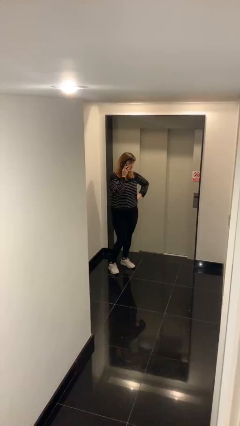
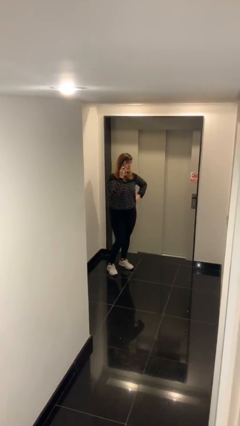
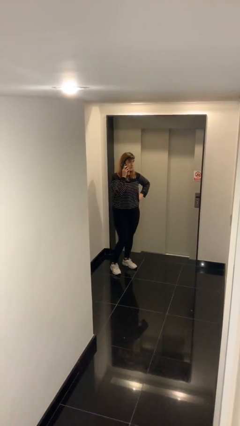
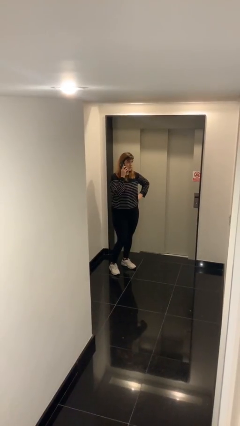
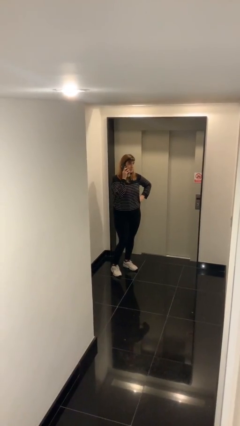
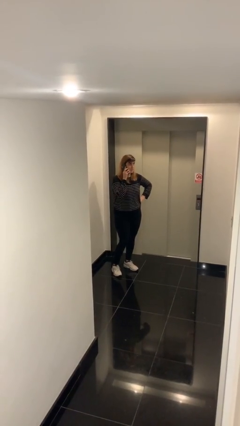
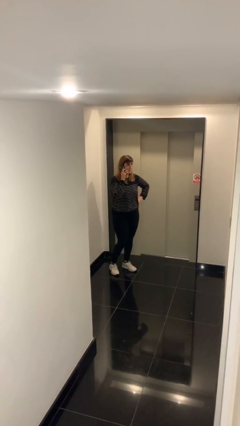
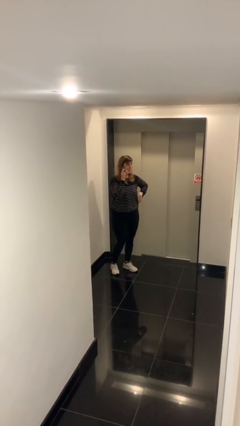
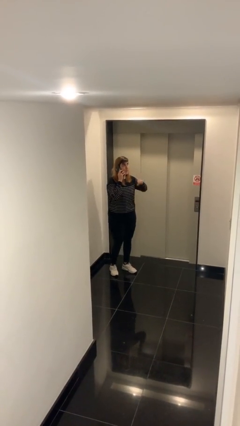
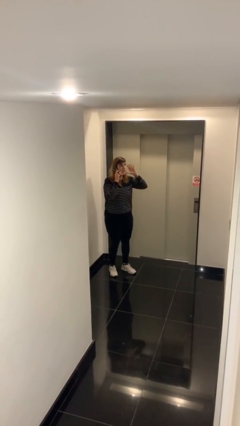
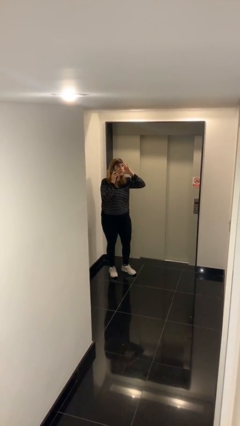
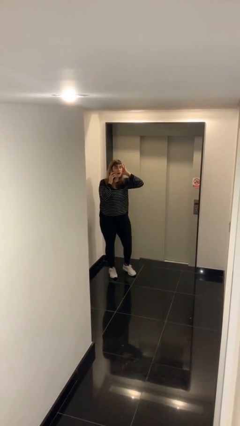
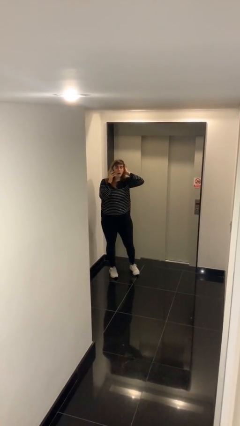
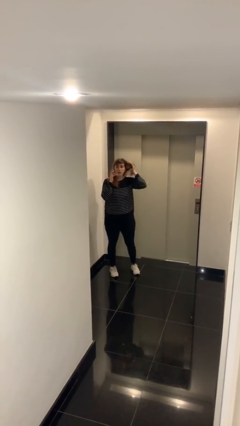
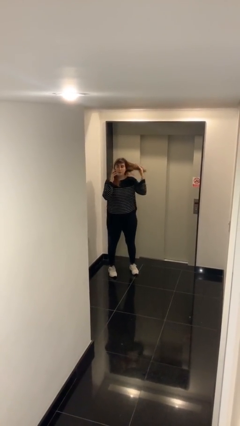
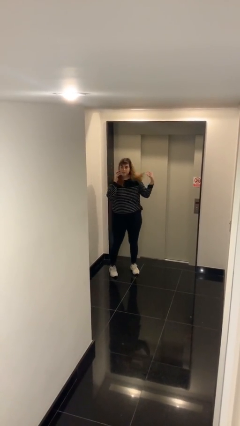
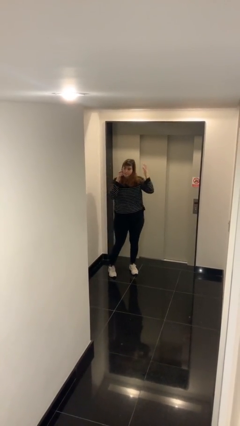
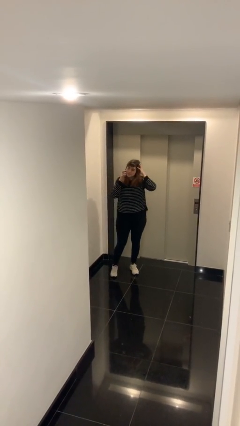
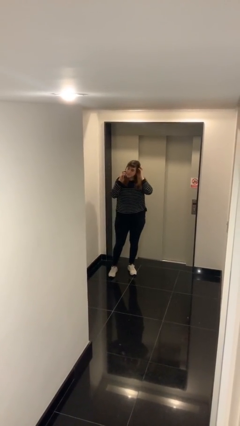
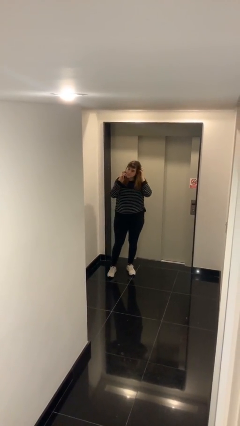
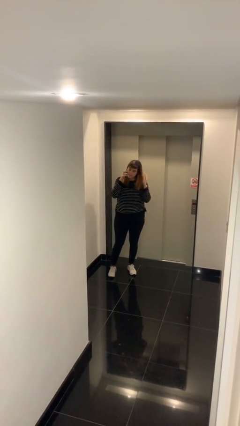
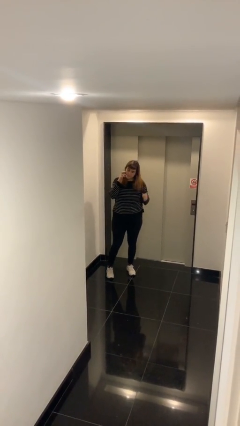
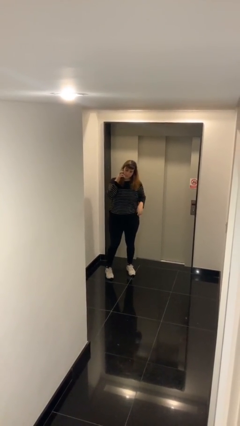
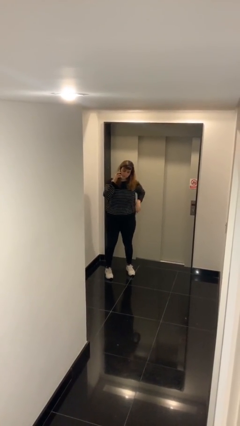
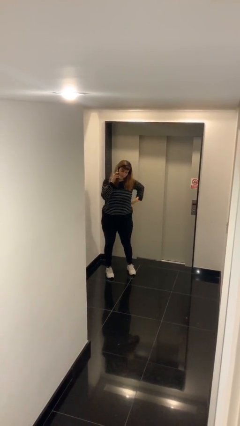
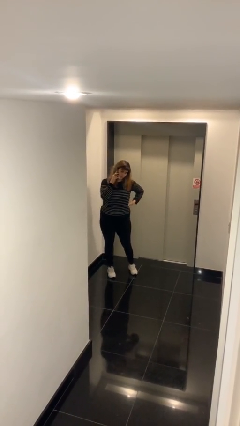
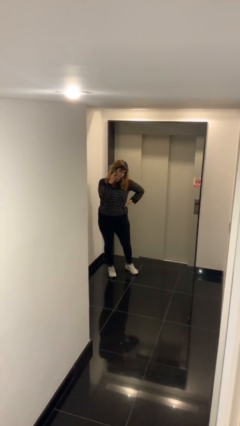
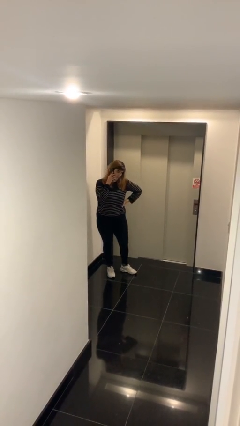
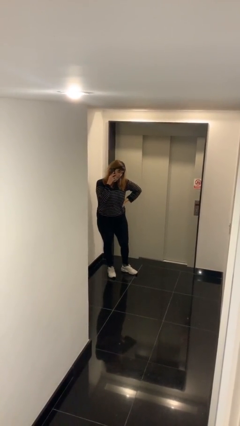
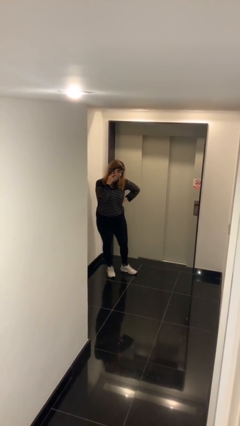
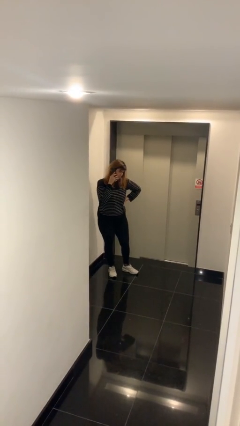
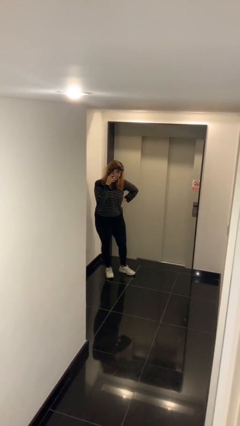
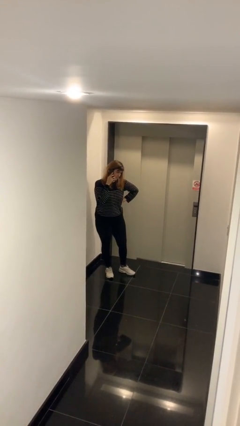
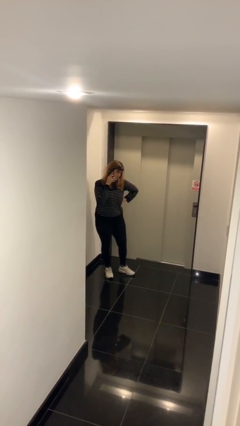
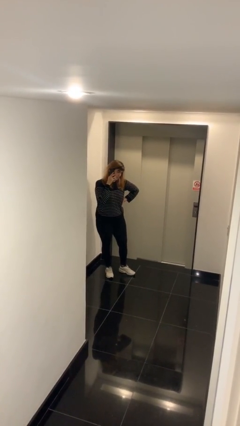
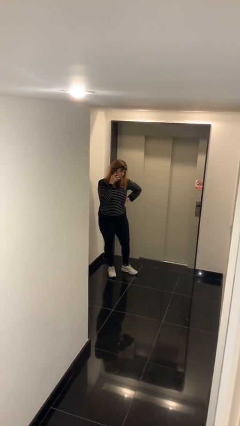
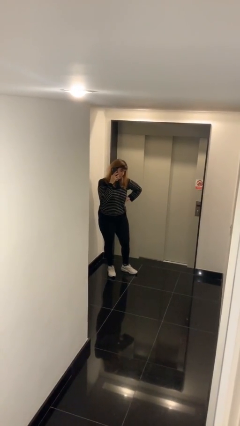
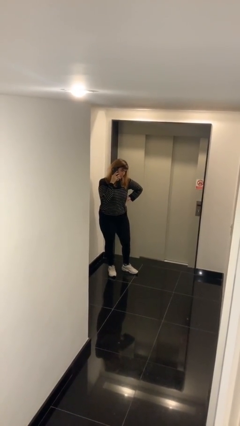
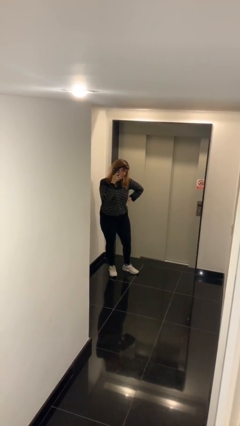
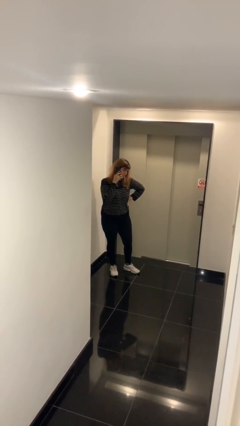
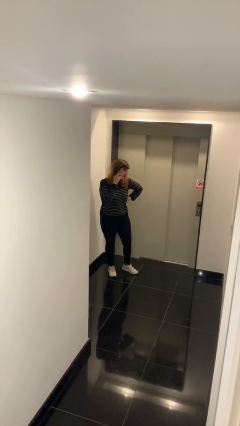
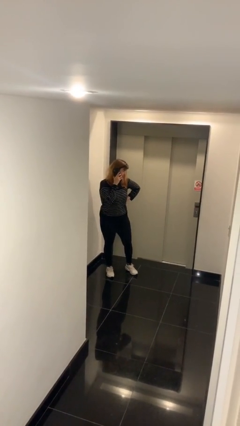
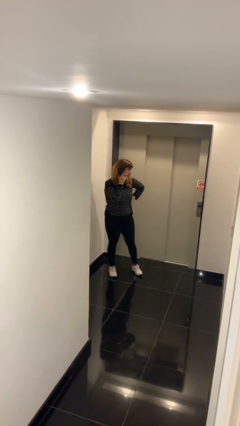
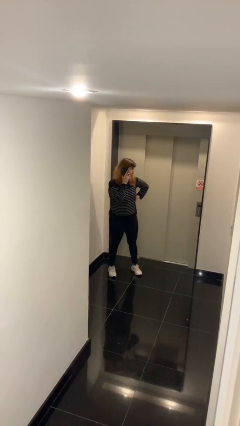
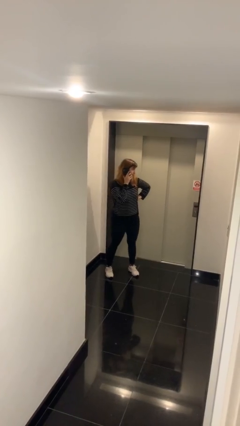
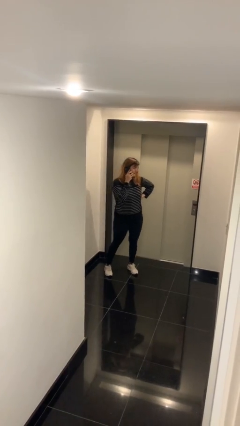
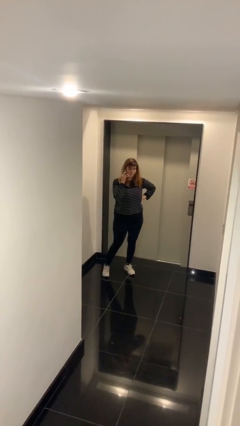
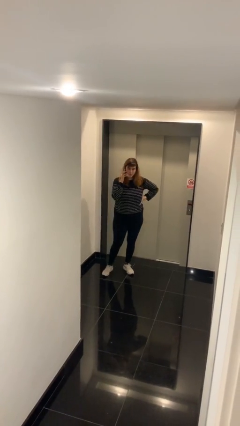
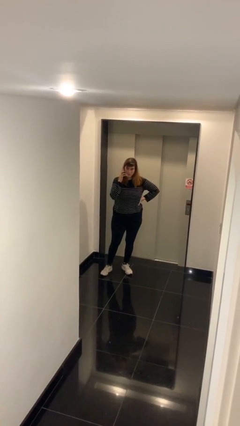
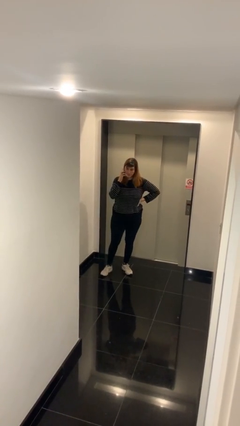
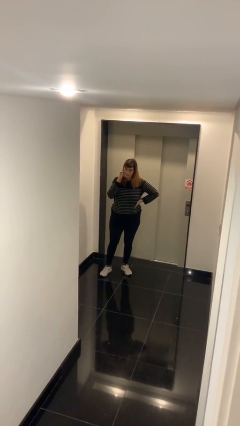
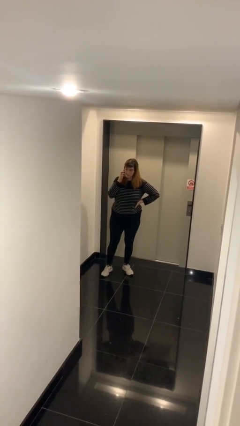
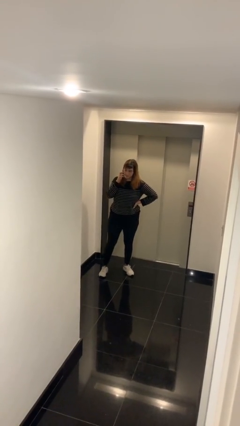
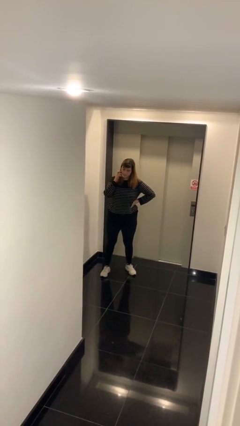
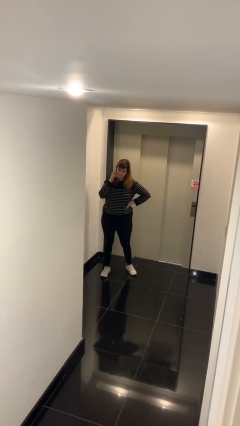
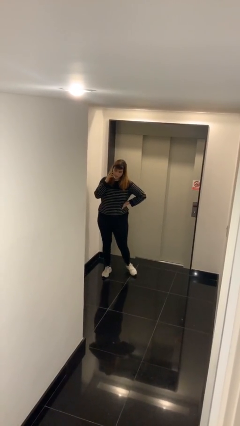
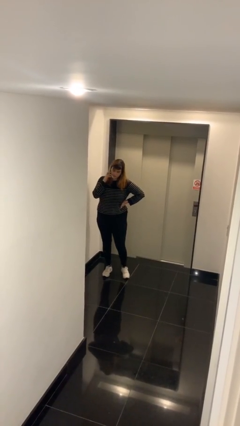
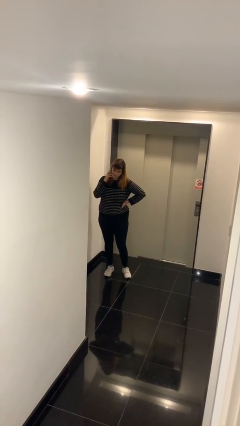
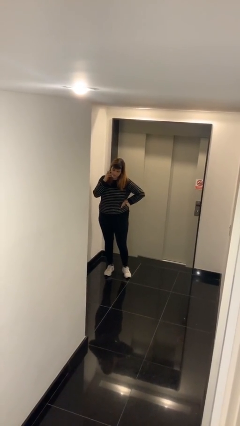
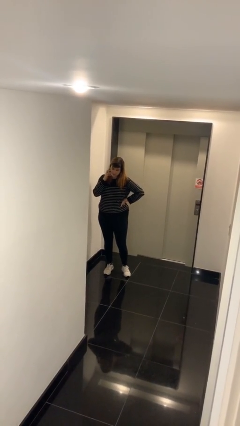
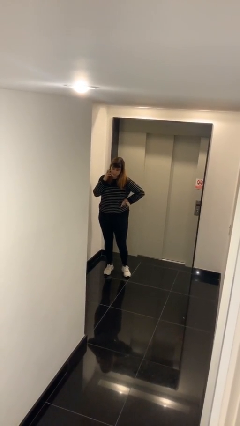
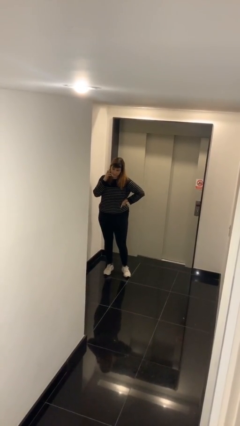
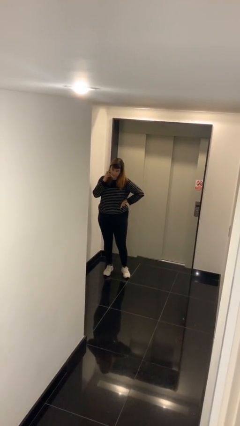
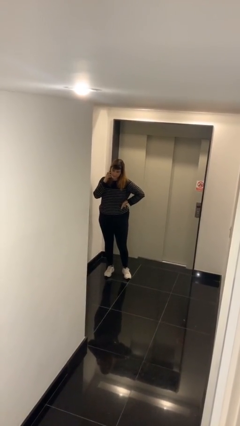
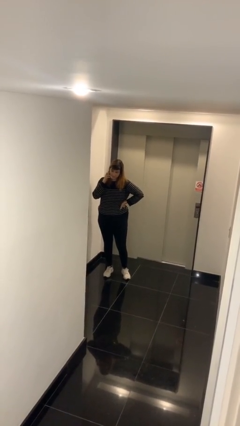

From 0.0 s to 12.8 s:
person talks on phone

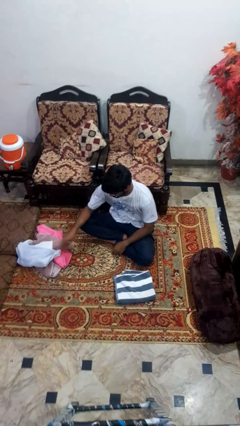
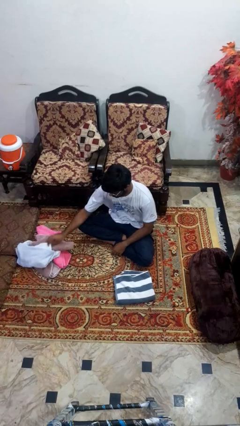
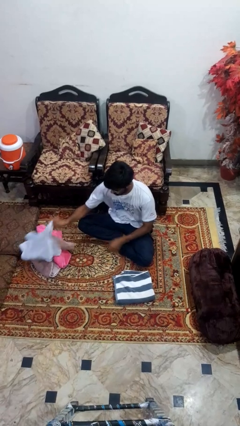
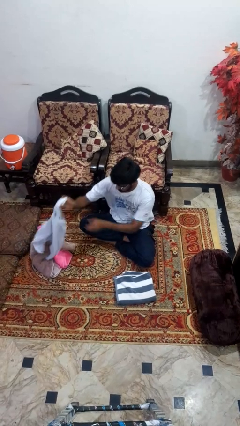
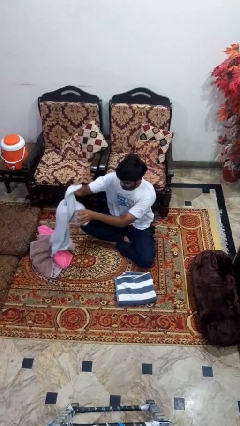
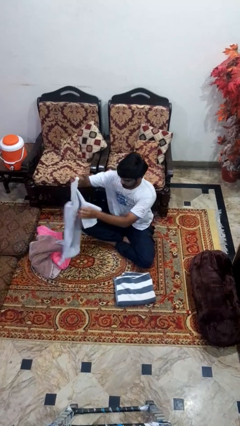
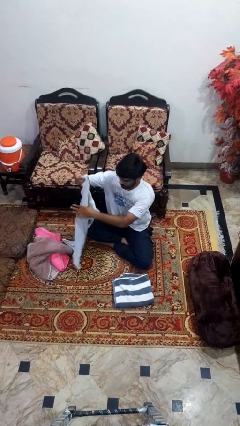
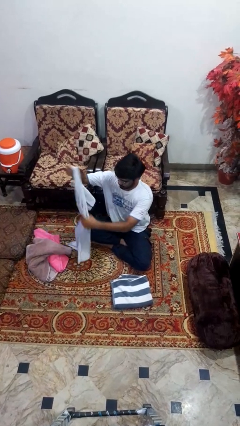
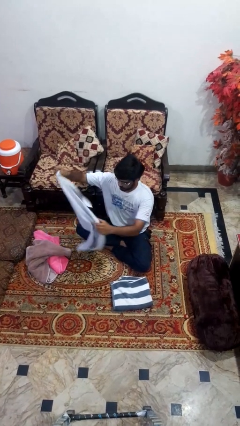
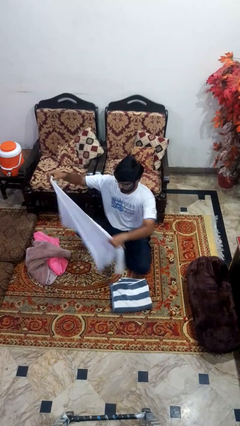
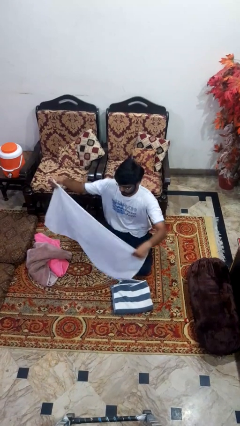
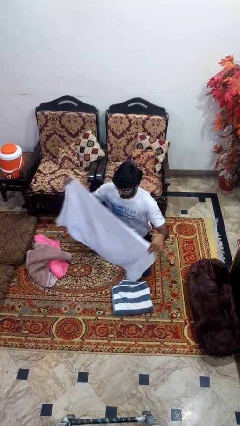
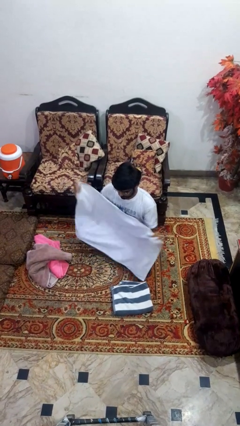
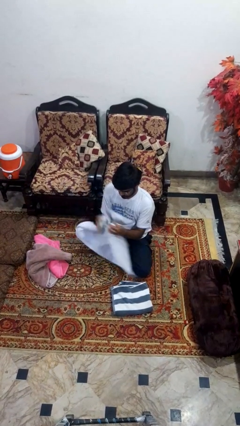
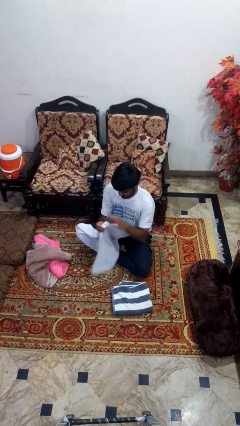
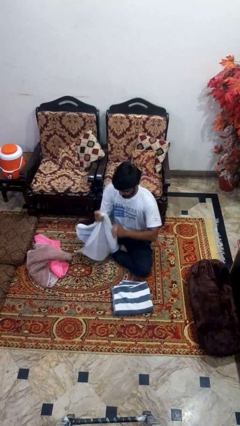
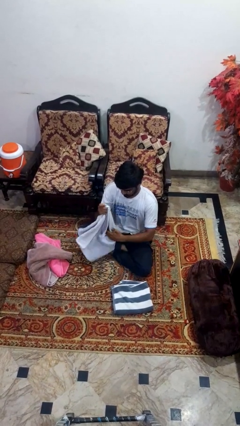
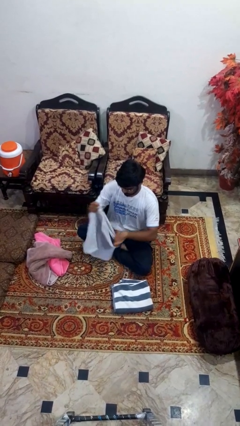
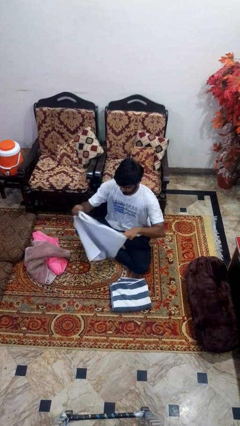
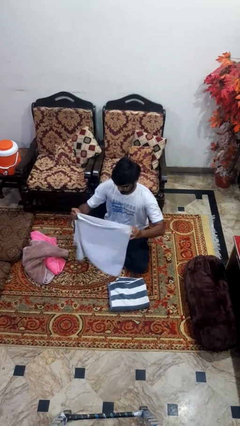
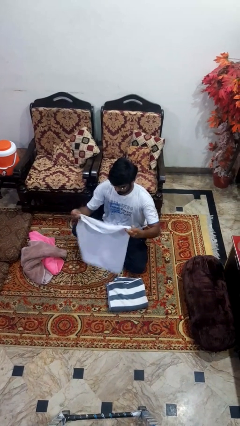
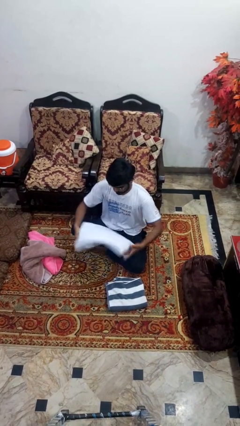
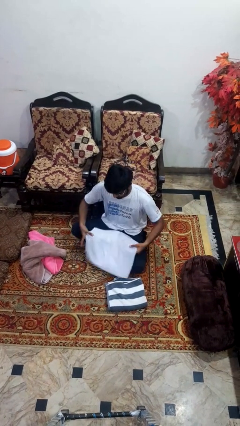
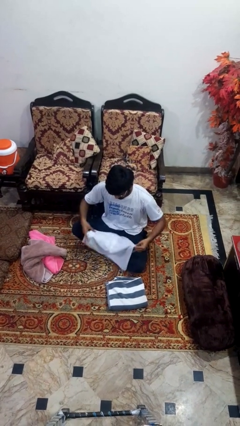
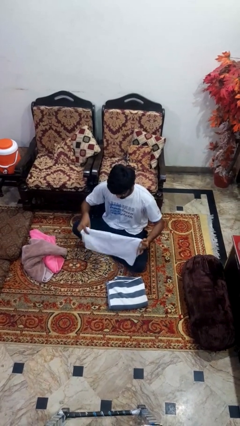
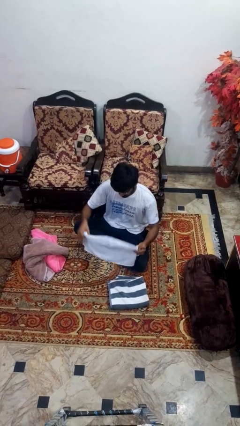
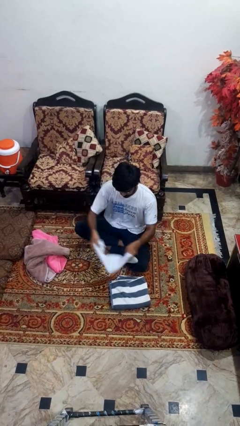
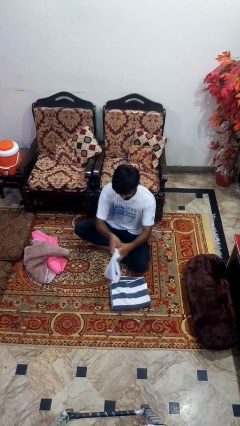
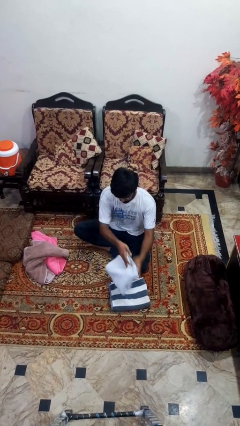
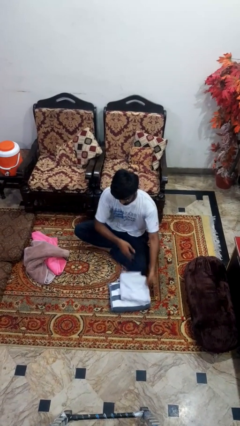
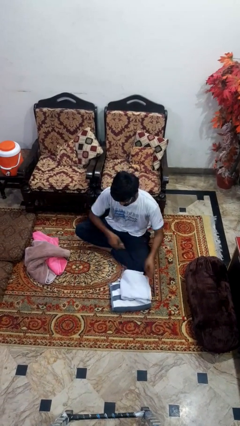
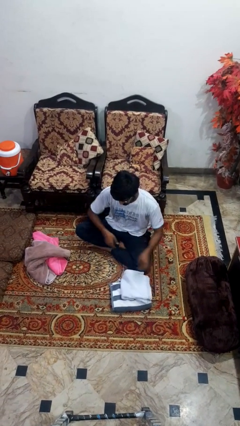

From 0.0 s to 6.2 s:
person folds towel
